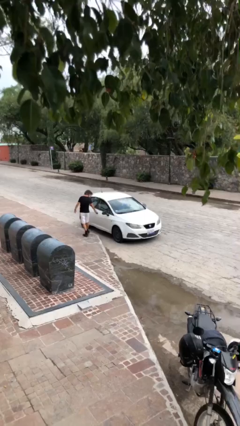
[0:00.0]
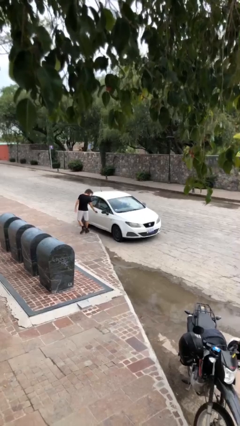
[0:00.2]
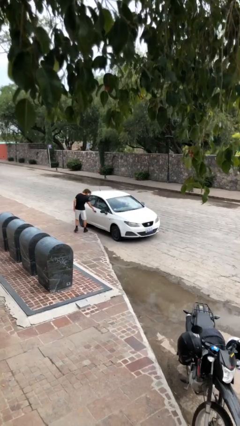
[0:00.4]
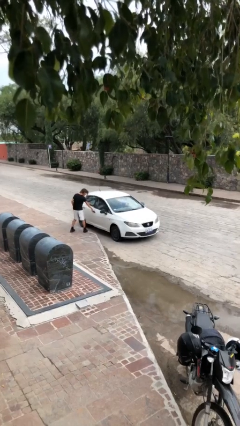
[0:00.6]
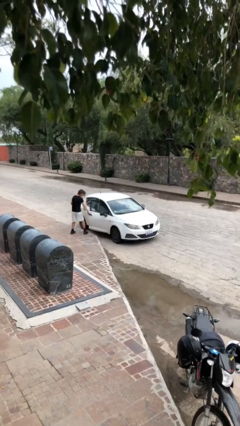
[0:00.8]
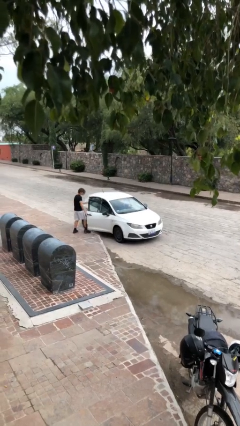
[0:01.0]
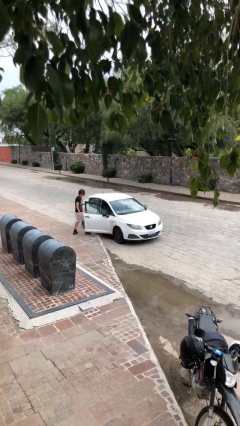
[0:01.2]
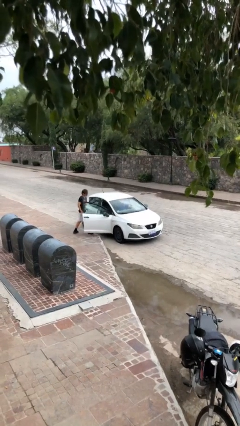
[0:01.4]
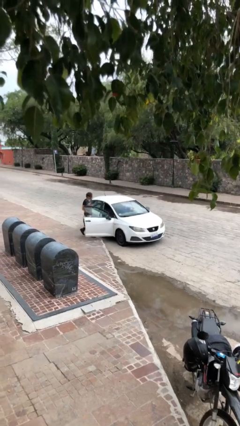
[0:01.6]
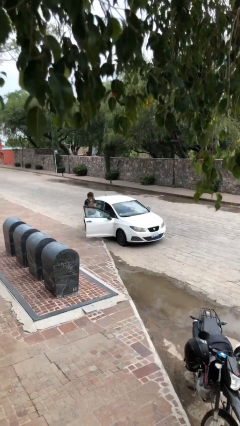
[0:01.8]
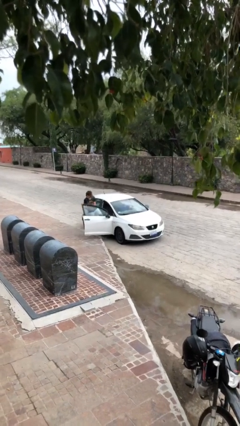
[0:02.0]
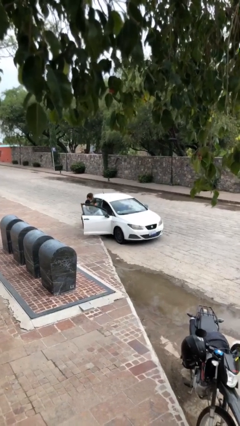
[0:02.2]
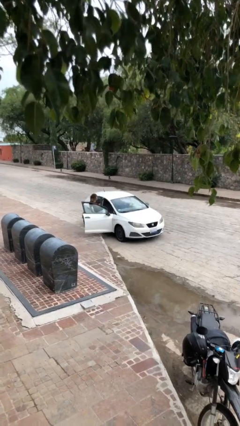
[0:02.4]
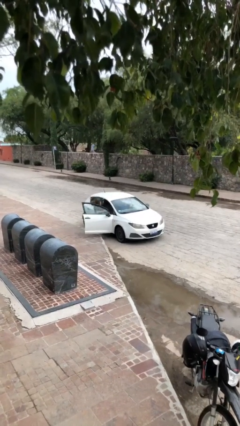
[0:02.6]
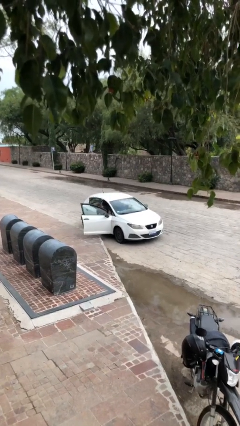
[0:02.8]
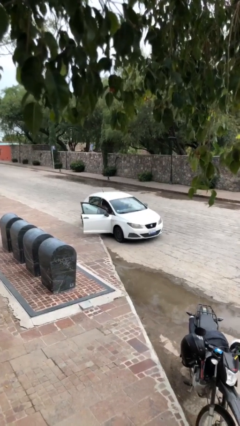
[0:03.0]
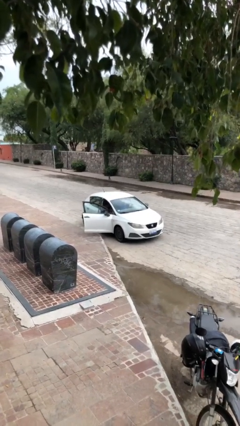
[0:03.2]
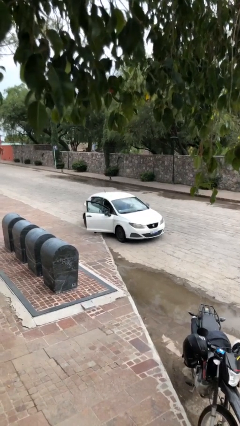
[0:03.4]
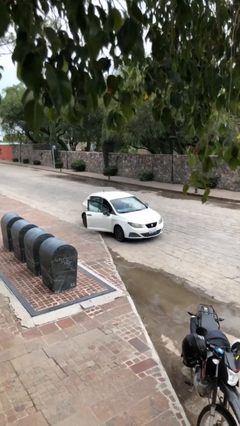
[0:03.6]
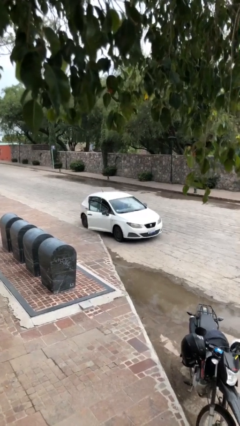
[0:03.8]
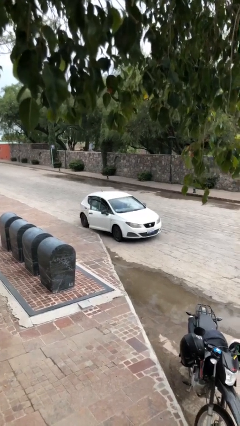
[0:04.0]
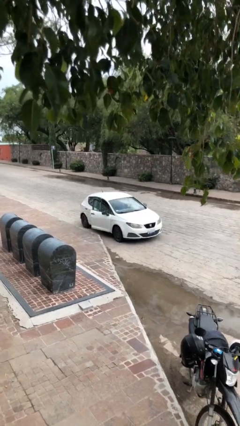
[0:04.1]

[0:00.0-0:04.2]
car picks up person

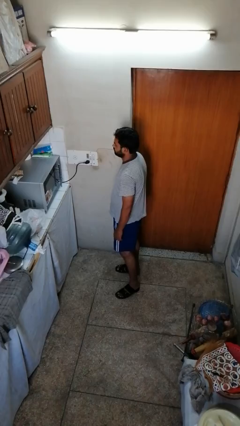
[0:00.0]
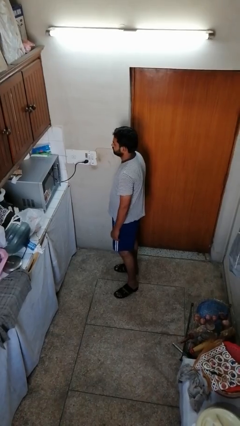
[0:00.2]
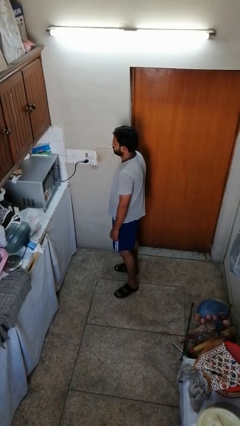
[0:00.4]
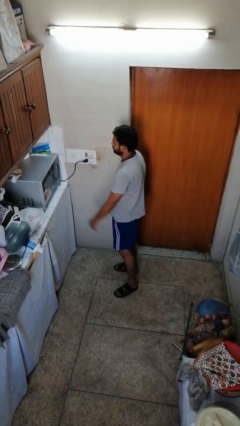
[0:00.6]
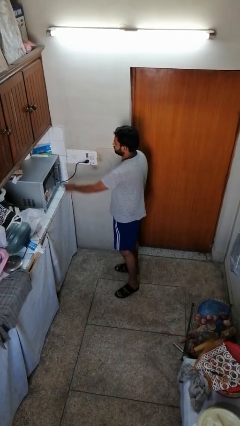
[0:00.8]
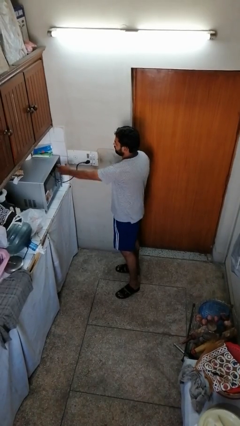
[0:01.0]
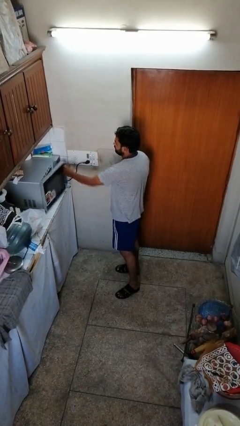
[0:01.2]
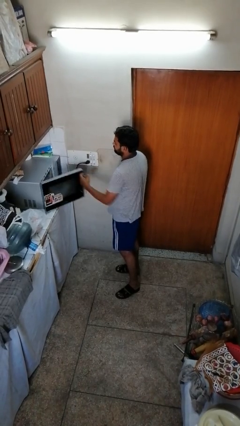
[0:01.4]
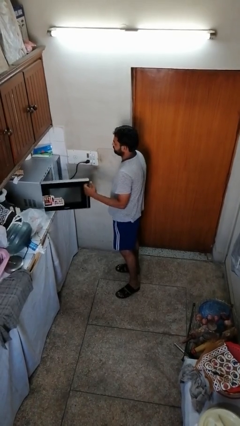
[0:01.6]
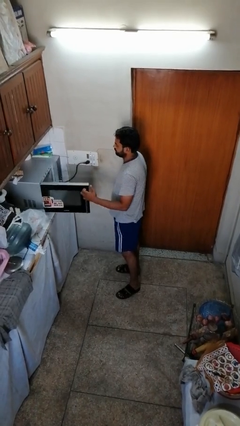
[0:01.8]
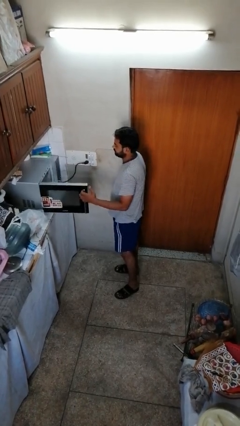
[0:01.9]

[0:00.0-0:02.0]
person opens oven door

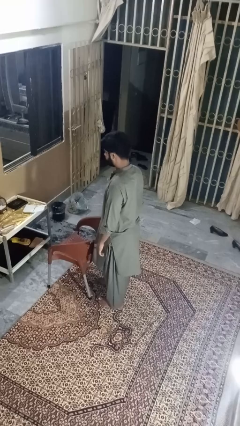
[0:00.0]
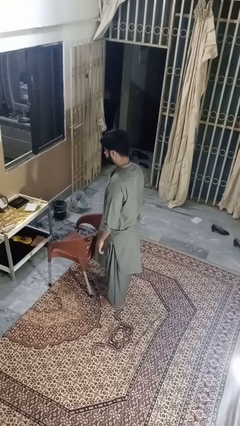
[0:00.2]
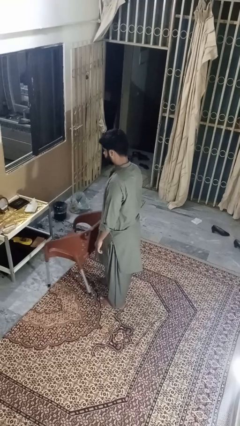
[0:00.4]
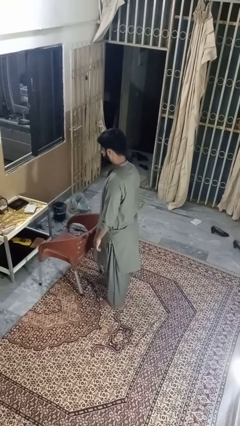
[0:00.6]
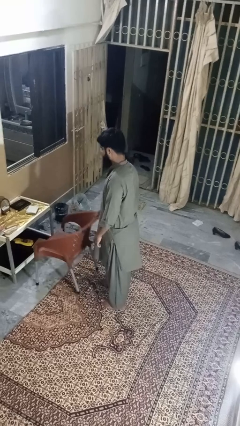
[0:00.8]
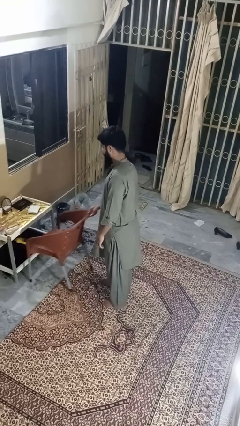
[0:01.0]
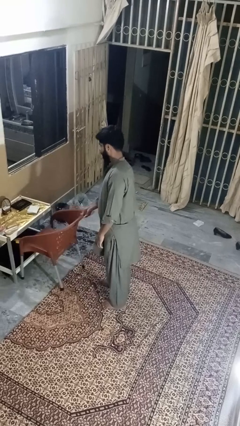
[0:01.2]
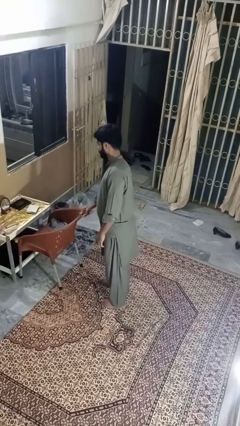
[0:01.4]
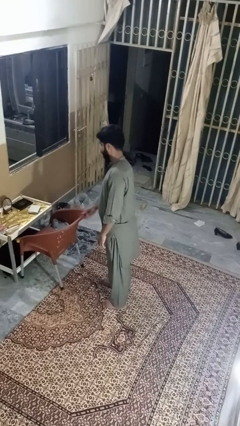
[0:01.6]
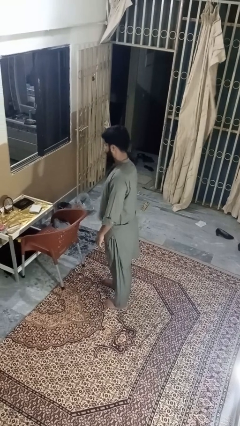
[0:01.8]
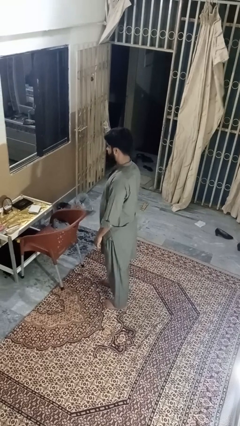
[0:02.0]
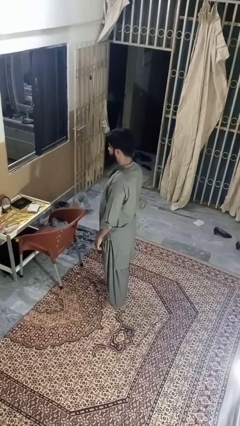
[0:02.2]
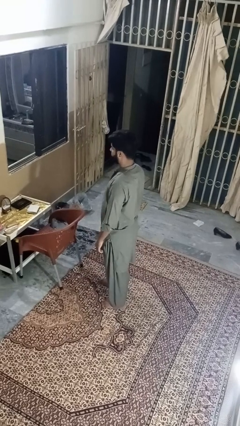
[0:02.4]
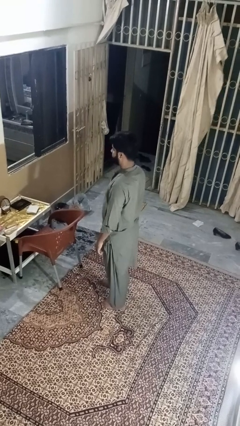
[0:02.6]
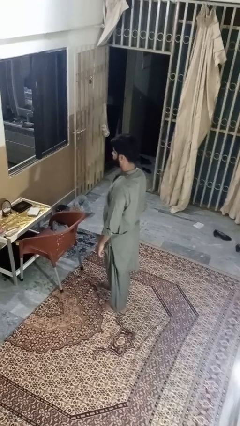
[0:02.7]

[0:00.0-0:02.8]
person pushes in chair

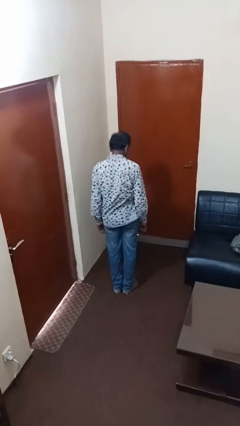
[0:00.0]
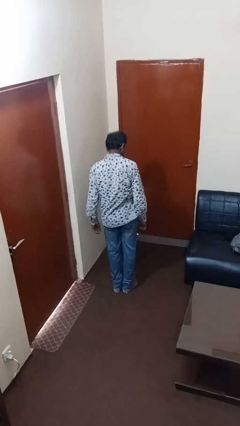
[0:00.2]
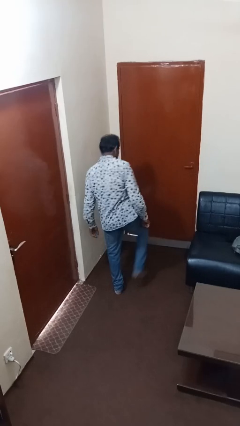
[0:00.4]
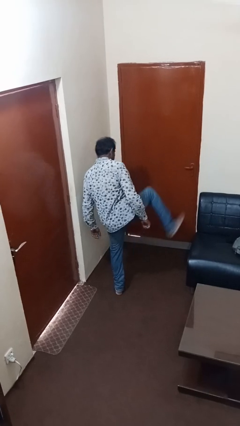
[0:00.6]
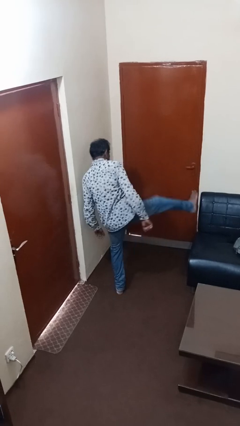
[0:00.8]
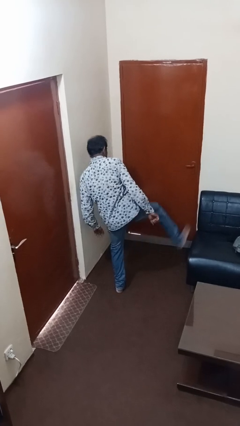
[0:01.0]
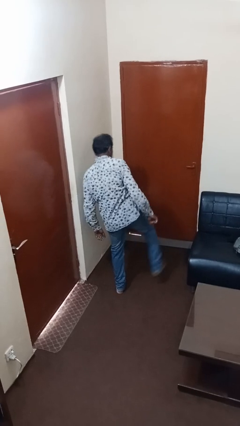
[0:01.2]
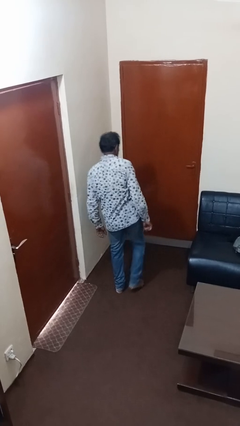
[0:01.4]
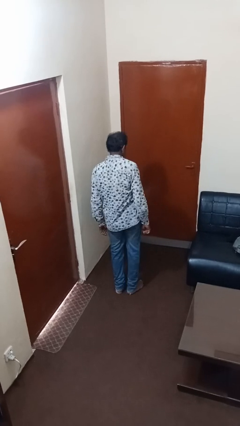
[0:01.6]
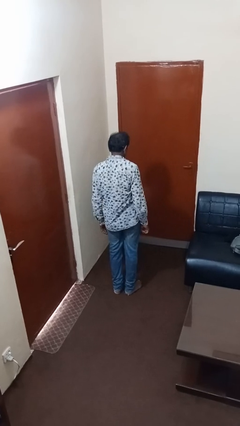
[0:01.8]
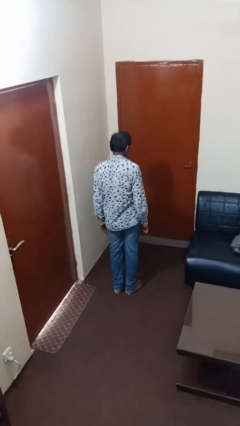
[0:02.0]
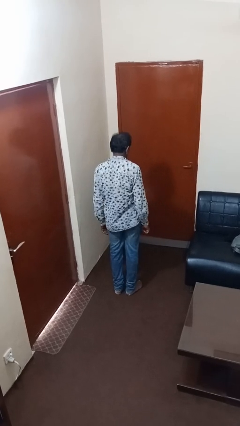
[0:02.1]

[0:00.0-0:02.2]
person karate kicks

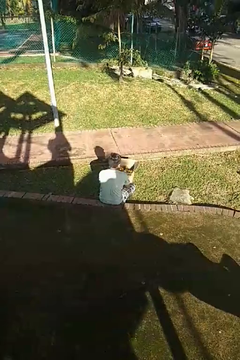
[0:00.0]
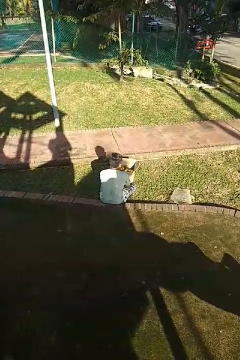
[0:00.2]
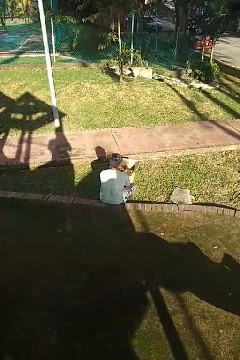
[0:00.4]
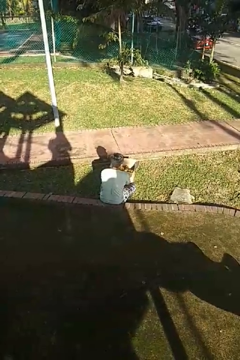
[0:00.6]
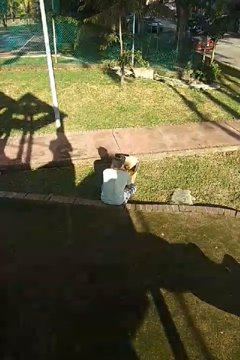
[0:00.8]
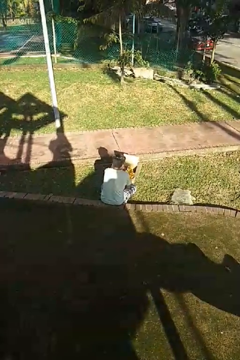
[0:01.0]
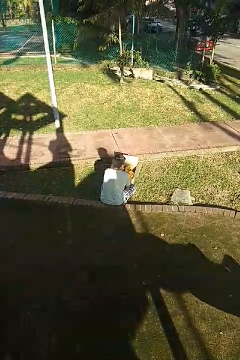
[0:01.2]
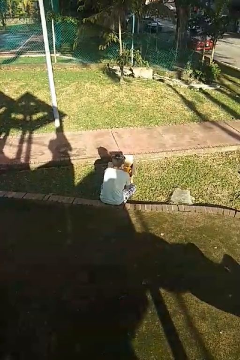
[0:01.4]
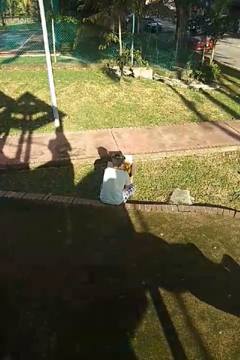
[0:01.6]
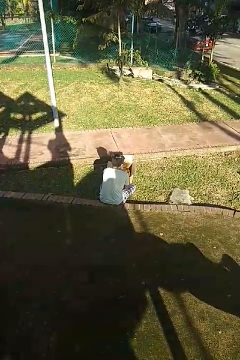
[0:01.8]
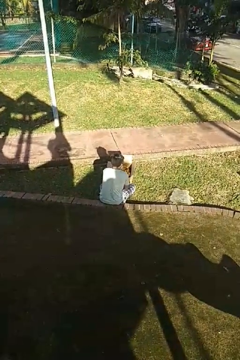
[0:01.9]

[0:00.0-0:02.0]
person searches in box

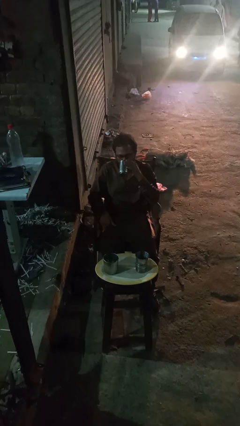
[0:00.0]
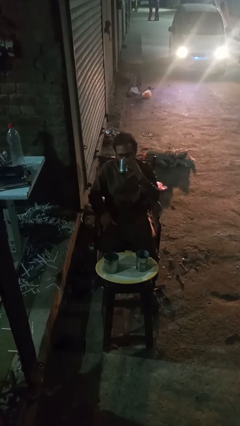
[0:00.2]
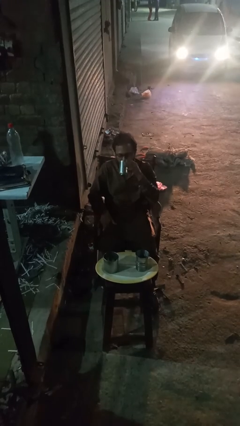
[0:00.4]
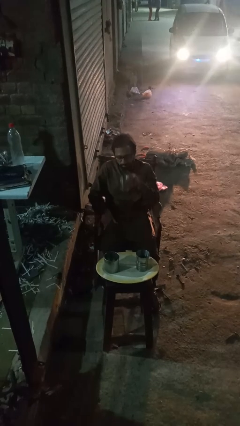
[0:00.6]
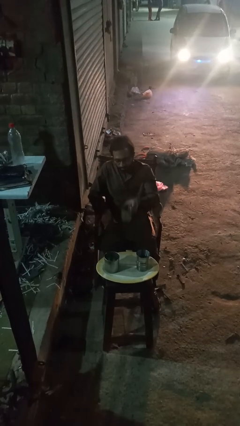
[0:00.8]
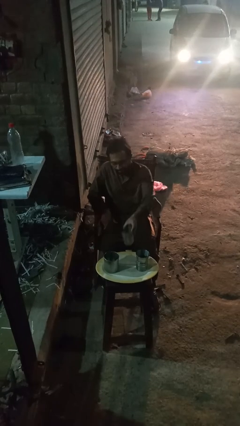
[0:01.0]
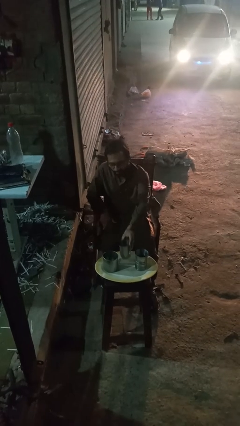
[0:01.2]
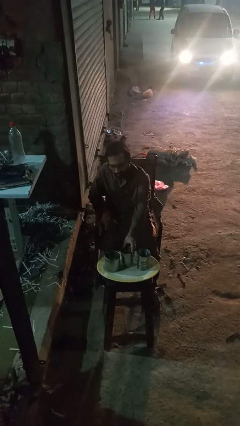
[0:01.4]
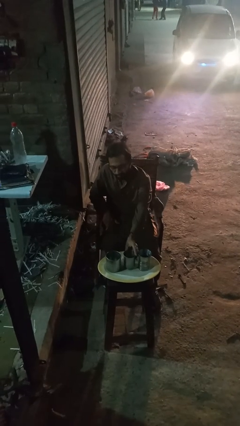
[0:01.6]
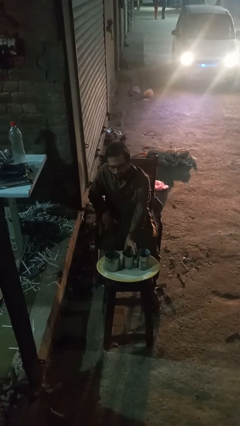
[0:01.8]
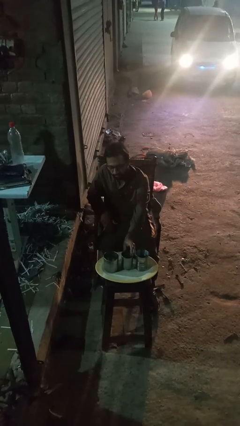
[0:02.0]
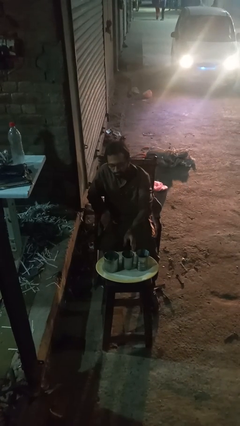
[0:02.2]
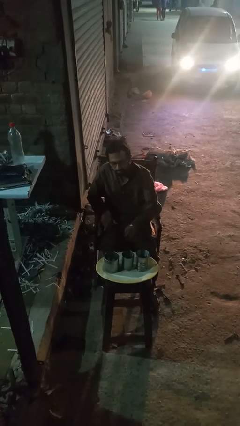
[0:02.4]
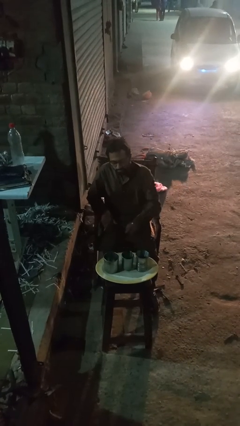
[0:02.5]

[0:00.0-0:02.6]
person puts down object on table

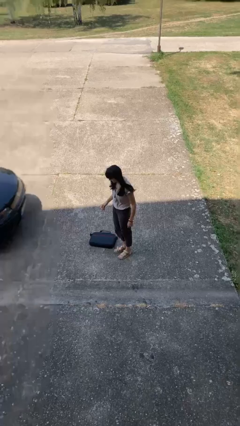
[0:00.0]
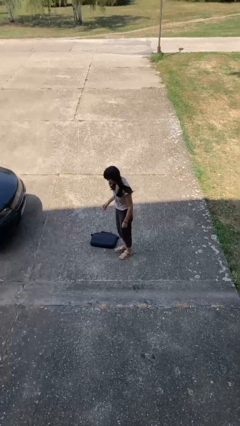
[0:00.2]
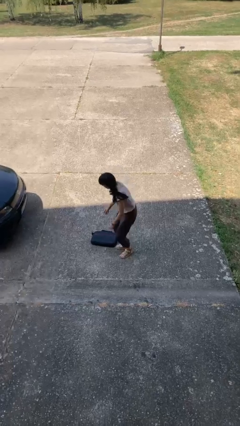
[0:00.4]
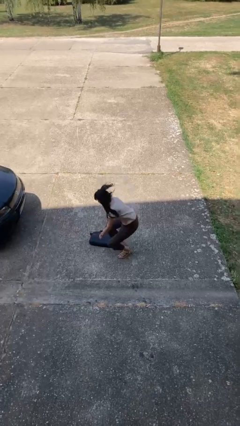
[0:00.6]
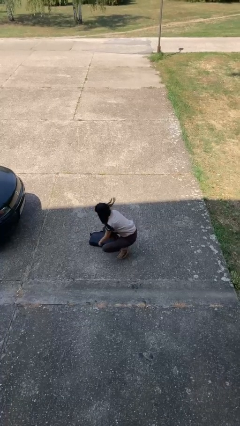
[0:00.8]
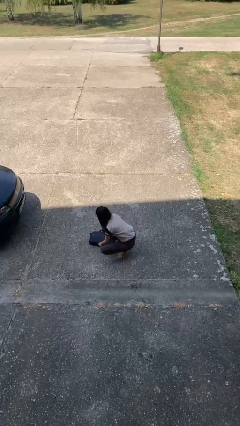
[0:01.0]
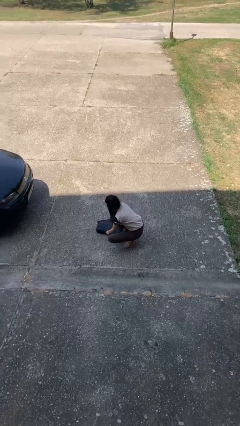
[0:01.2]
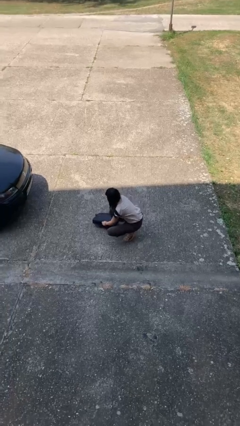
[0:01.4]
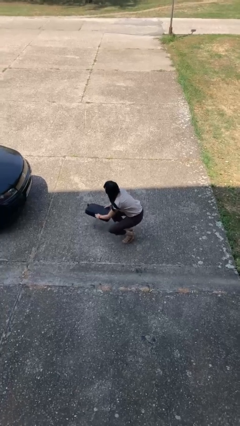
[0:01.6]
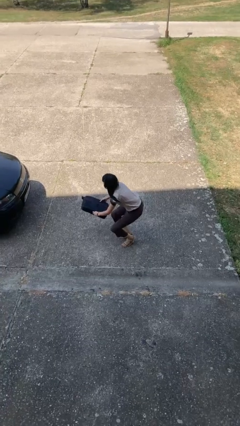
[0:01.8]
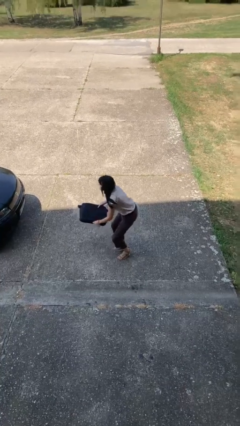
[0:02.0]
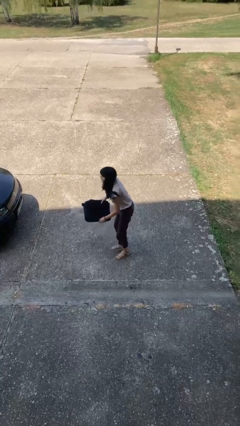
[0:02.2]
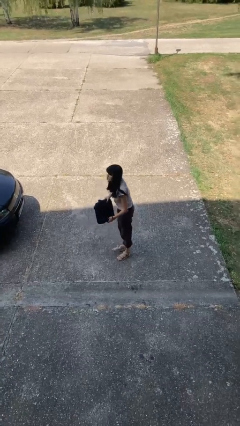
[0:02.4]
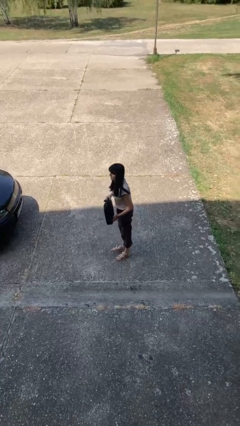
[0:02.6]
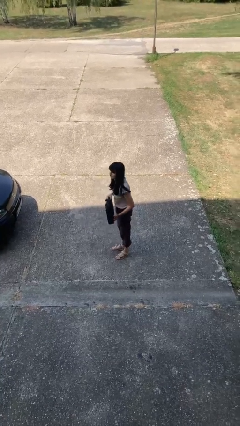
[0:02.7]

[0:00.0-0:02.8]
person picks up object from floor
